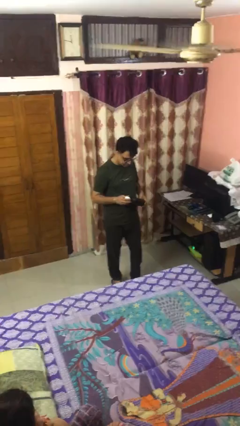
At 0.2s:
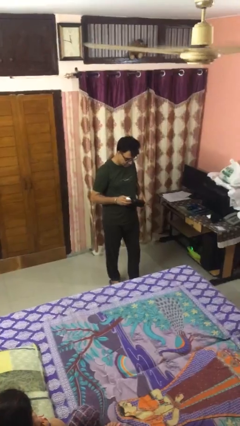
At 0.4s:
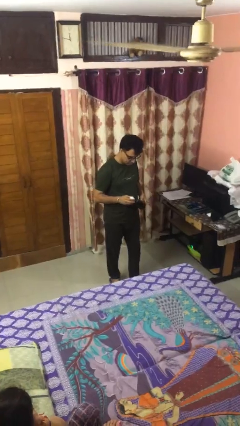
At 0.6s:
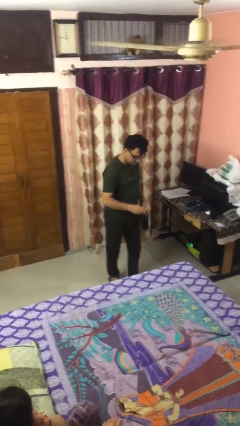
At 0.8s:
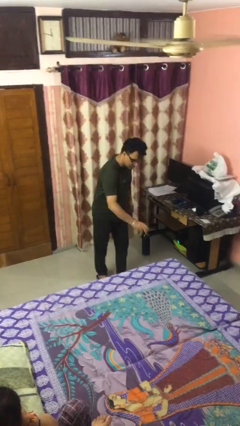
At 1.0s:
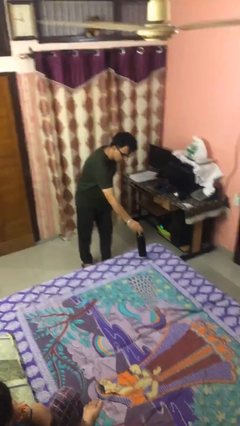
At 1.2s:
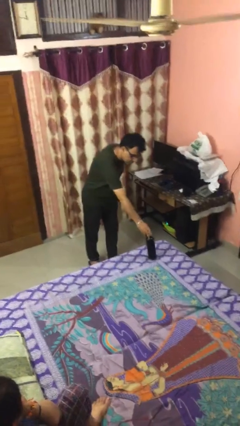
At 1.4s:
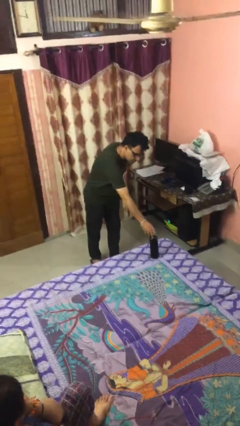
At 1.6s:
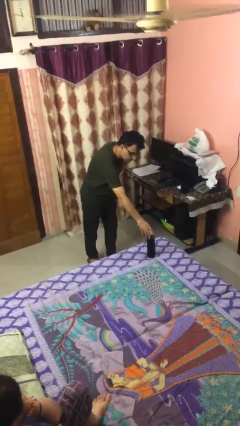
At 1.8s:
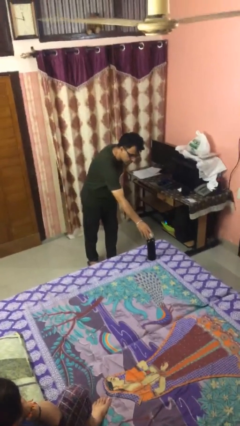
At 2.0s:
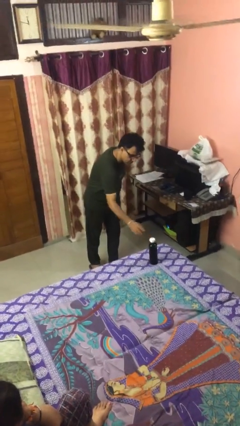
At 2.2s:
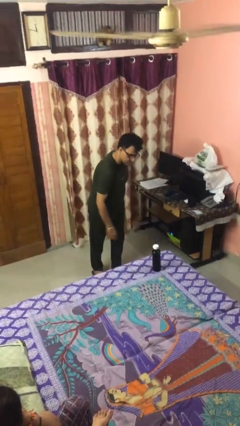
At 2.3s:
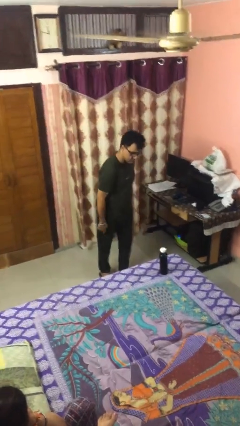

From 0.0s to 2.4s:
person puts down object on bed

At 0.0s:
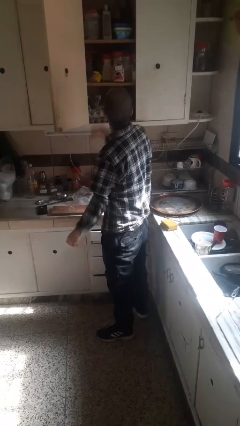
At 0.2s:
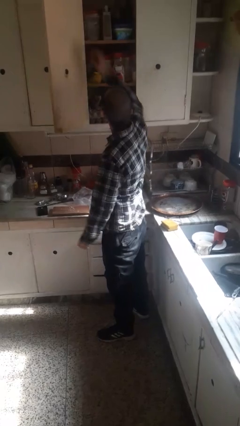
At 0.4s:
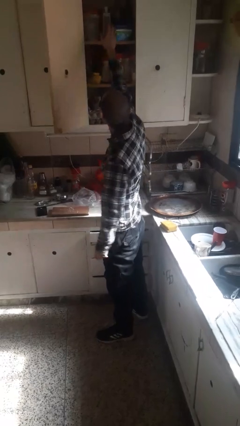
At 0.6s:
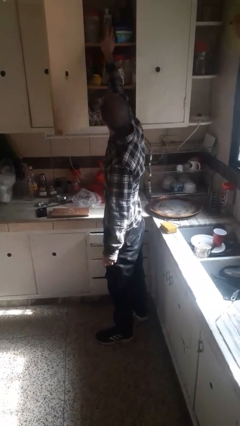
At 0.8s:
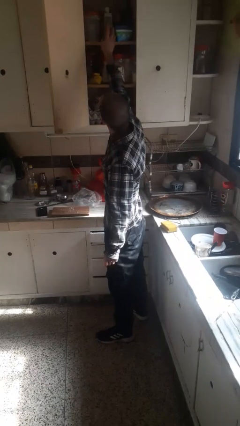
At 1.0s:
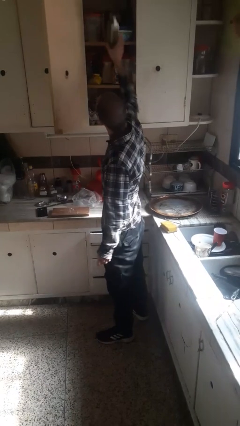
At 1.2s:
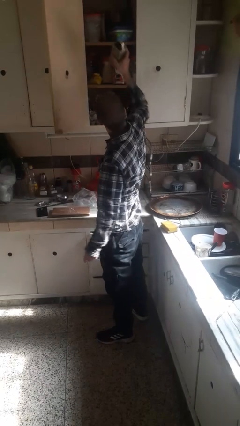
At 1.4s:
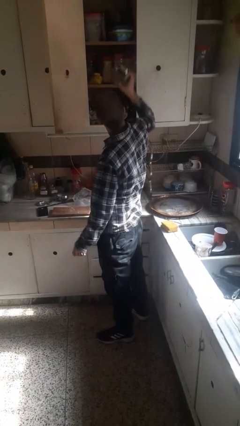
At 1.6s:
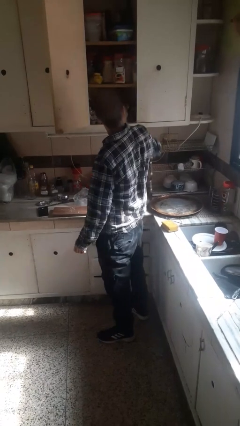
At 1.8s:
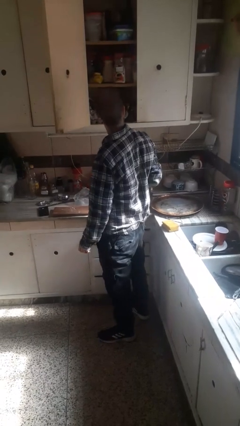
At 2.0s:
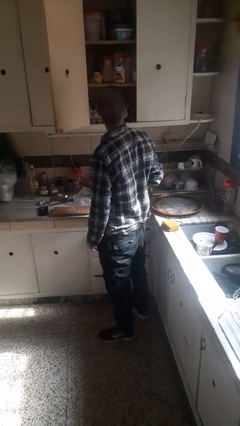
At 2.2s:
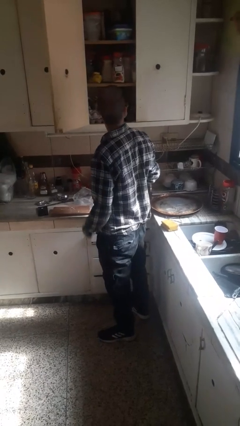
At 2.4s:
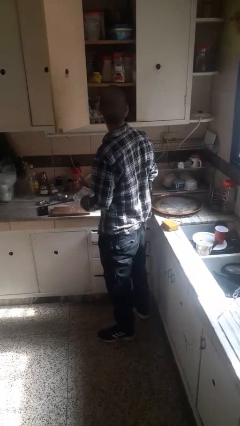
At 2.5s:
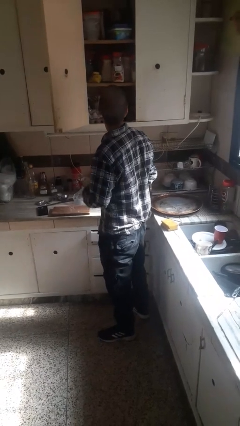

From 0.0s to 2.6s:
person puts down object into cabinet

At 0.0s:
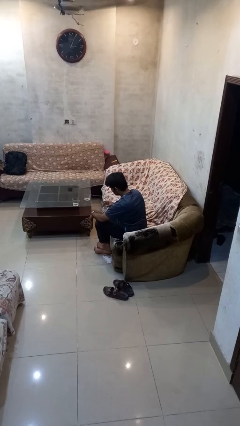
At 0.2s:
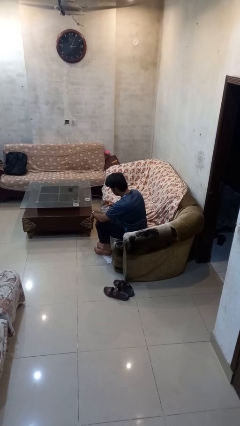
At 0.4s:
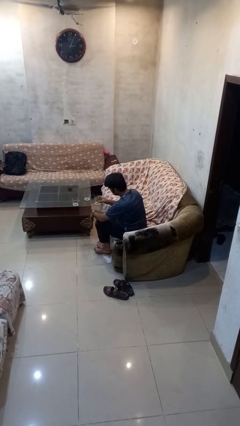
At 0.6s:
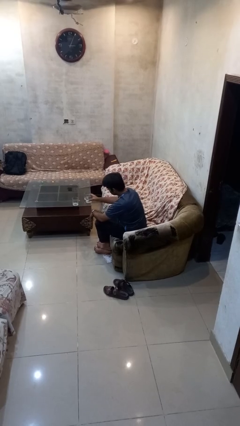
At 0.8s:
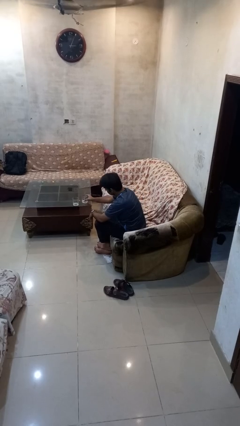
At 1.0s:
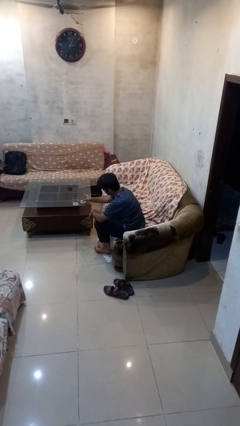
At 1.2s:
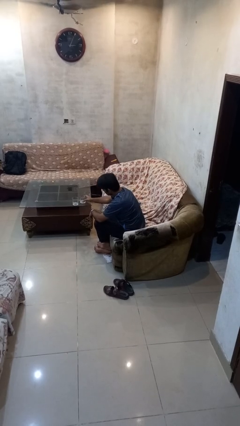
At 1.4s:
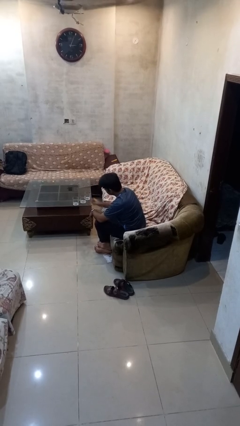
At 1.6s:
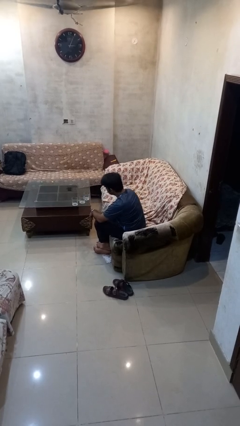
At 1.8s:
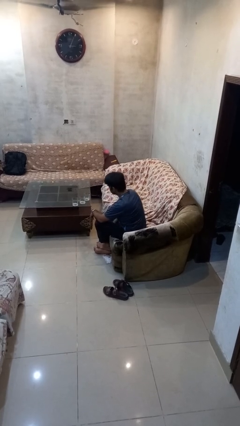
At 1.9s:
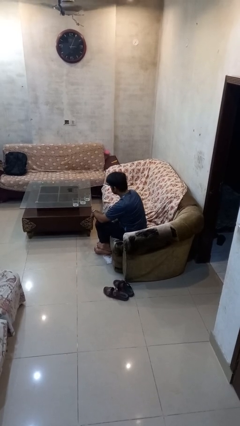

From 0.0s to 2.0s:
person puts down object on table

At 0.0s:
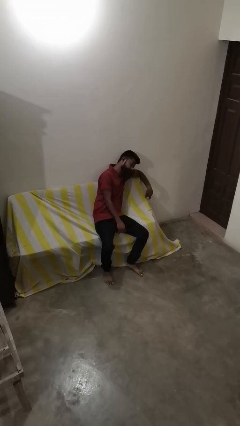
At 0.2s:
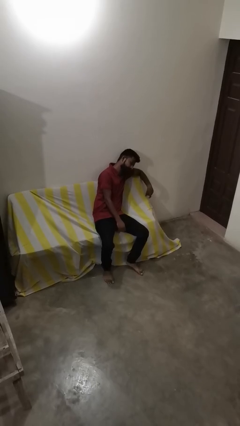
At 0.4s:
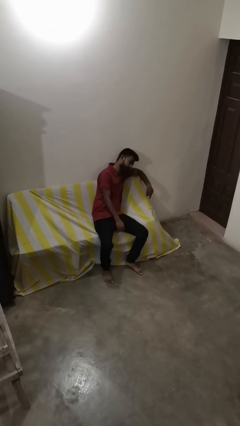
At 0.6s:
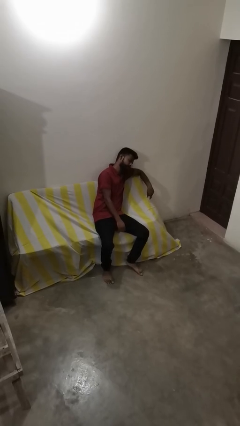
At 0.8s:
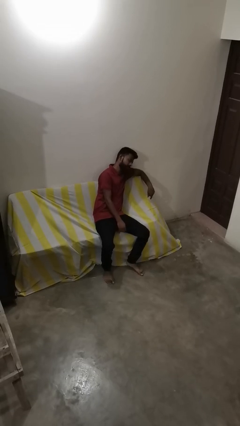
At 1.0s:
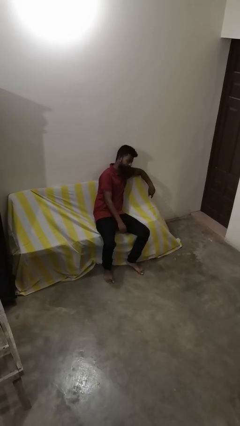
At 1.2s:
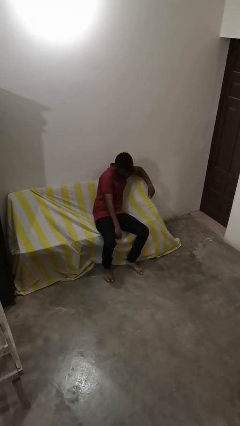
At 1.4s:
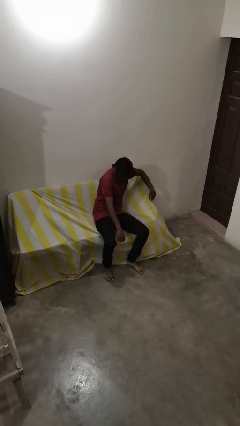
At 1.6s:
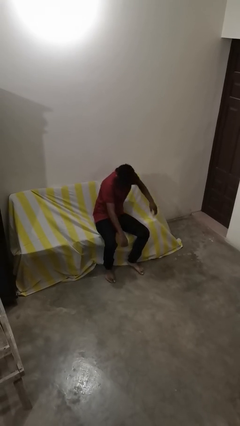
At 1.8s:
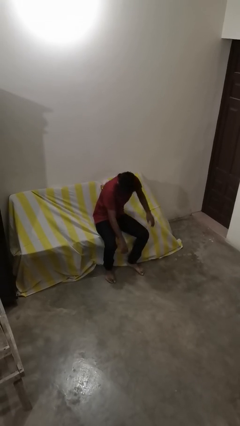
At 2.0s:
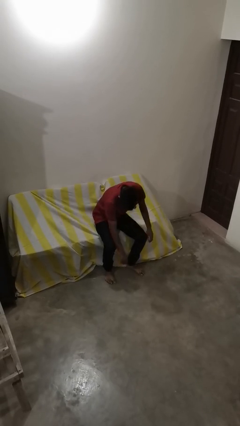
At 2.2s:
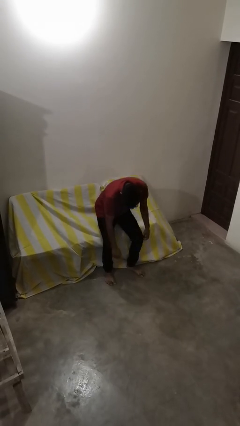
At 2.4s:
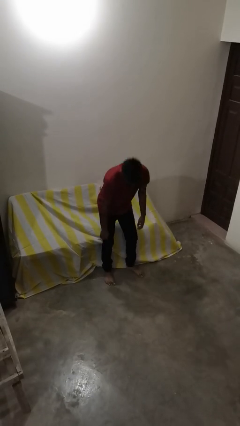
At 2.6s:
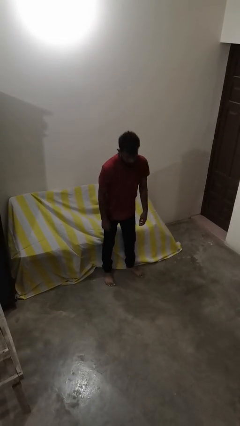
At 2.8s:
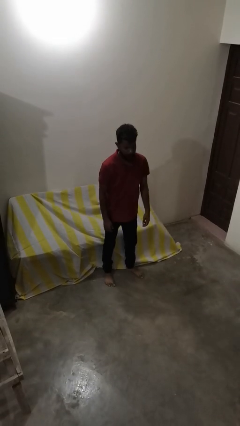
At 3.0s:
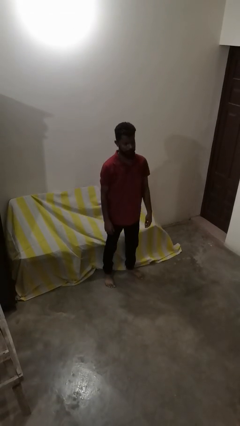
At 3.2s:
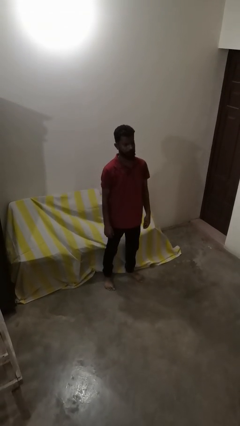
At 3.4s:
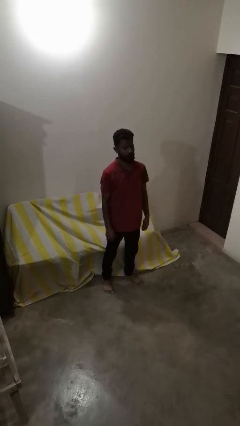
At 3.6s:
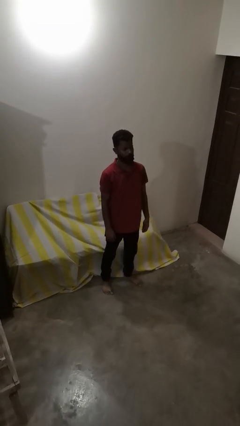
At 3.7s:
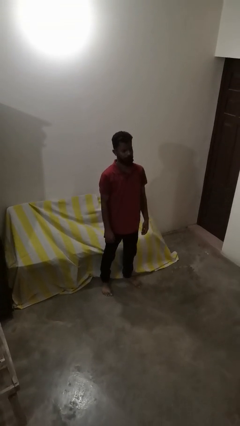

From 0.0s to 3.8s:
person stands up

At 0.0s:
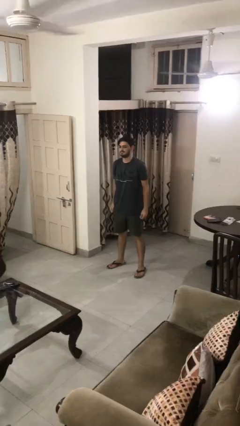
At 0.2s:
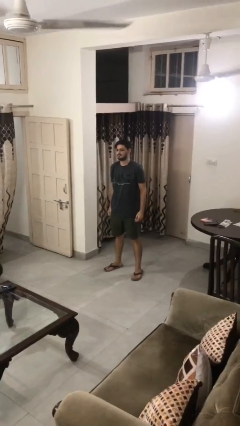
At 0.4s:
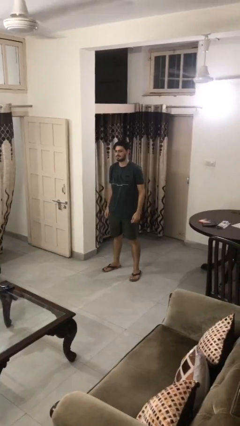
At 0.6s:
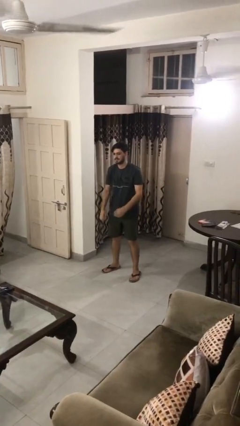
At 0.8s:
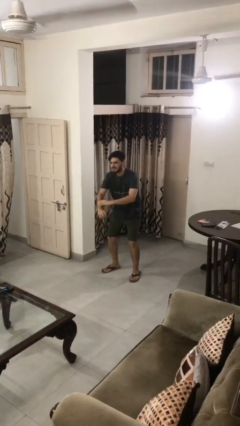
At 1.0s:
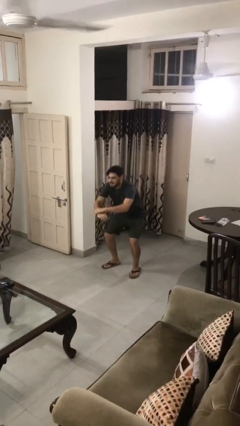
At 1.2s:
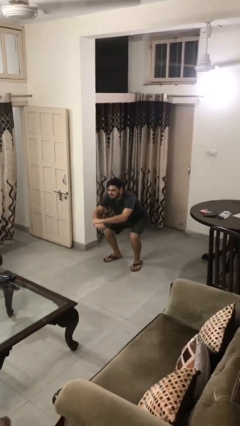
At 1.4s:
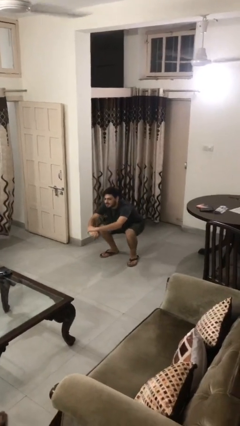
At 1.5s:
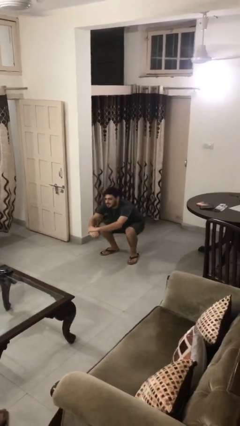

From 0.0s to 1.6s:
person squats

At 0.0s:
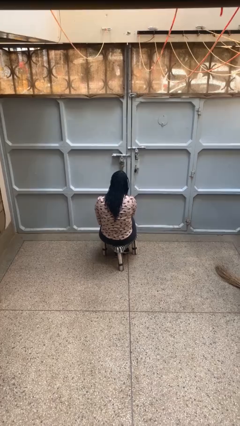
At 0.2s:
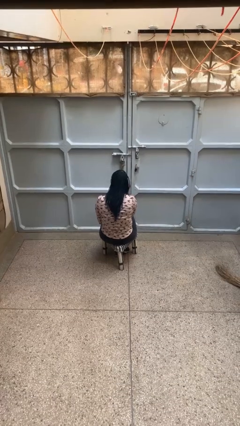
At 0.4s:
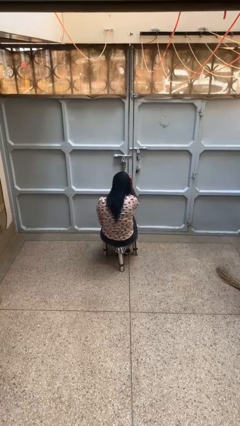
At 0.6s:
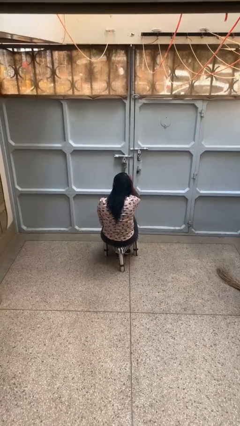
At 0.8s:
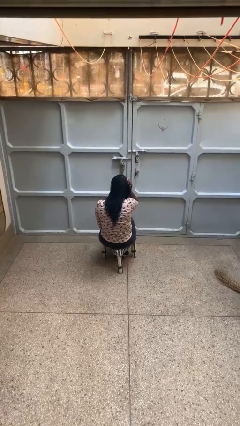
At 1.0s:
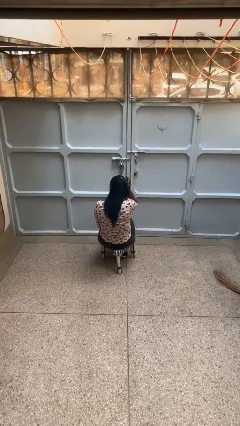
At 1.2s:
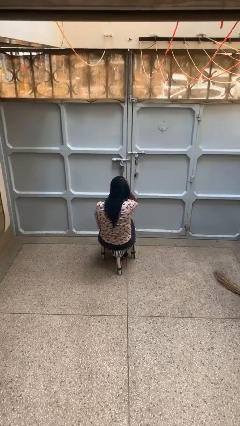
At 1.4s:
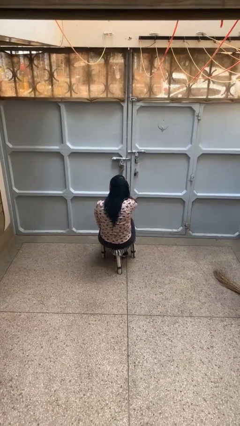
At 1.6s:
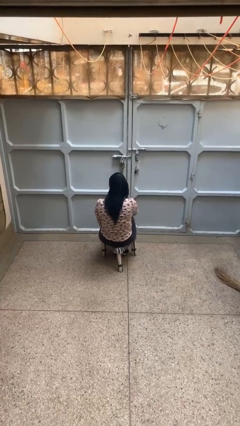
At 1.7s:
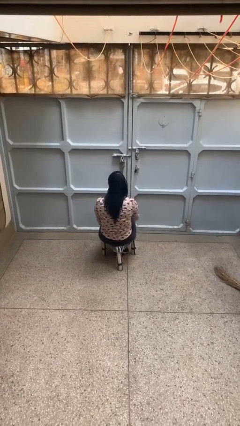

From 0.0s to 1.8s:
person strokes hair

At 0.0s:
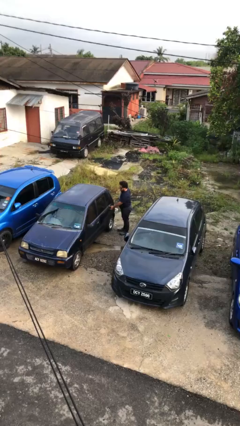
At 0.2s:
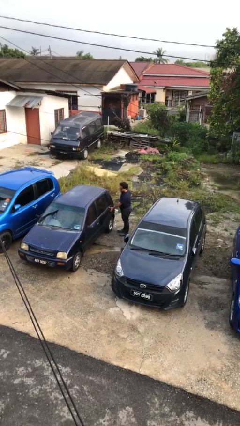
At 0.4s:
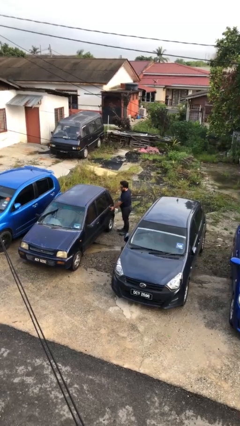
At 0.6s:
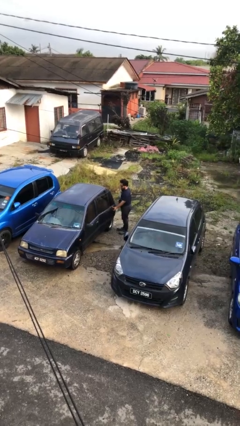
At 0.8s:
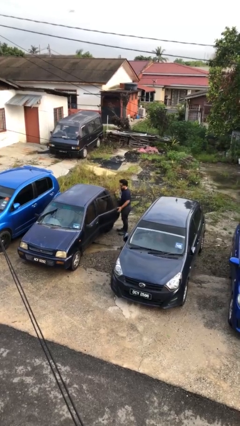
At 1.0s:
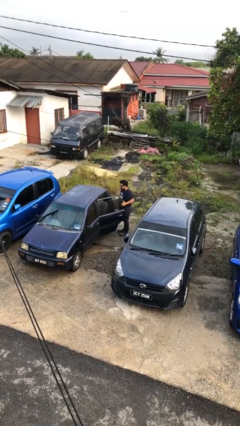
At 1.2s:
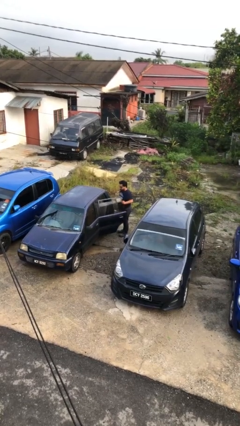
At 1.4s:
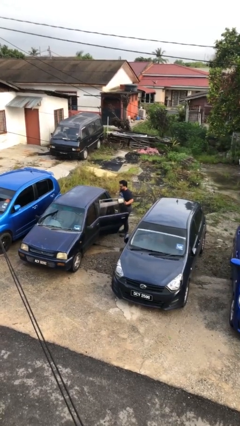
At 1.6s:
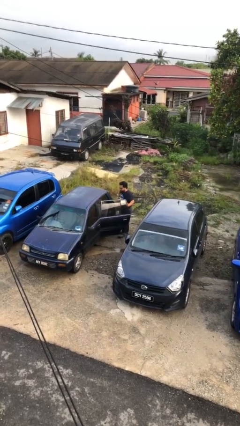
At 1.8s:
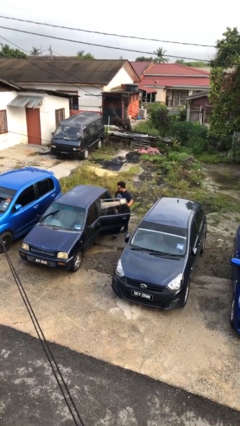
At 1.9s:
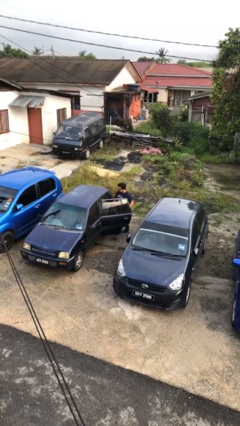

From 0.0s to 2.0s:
person opens car door

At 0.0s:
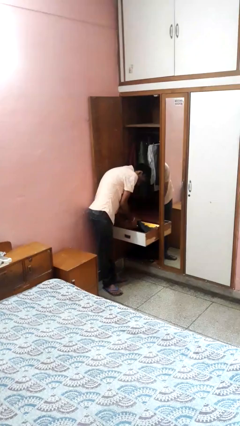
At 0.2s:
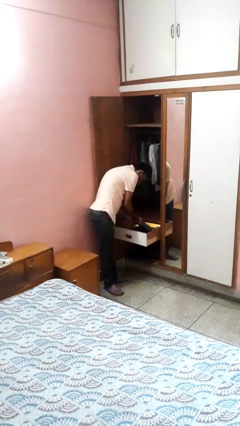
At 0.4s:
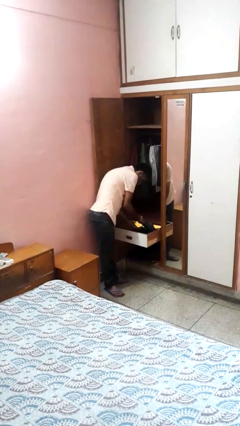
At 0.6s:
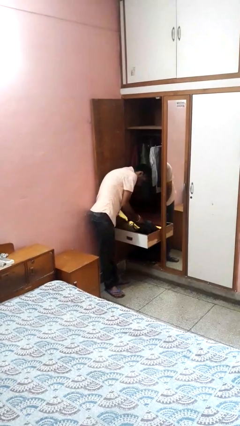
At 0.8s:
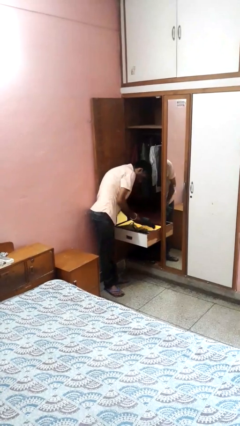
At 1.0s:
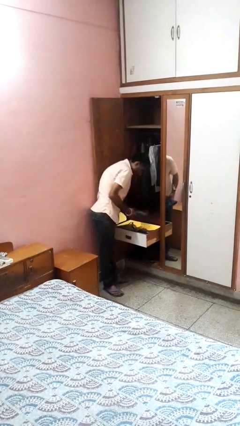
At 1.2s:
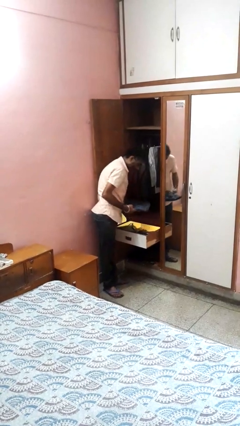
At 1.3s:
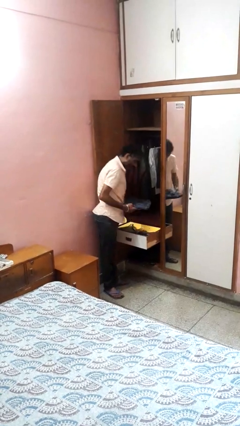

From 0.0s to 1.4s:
person takes clothes from dresser
